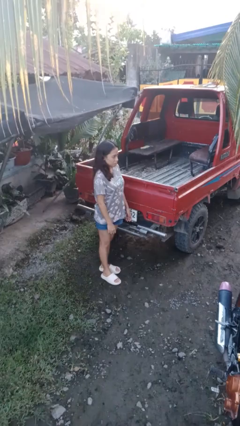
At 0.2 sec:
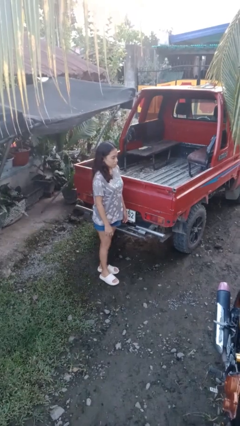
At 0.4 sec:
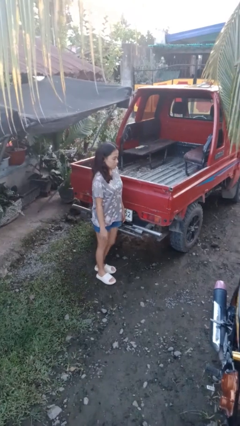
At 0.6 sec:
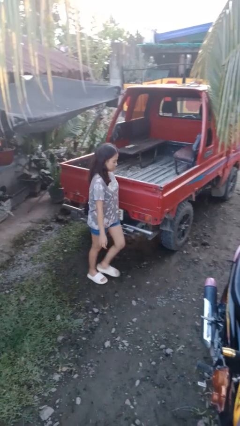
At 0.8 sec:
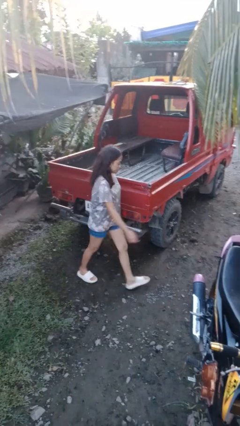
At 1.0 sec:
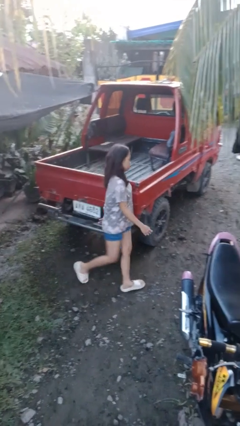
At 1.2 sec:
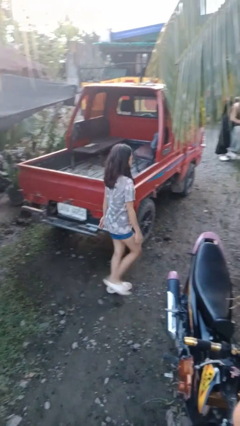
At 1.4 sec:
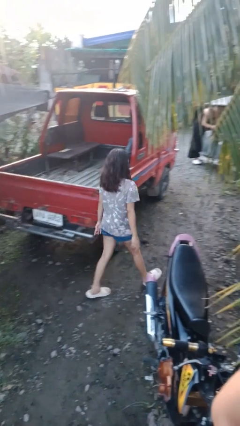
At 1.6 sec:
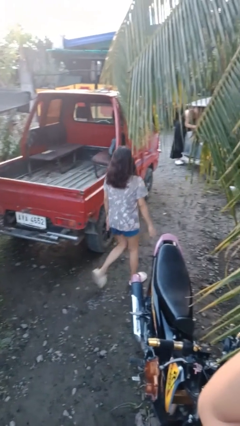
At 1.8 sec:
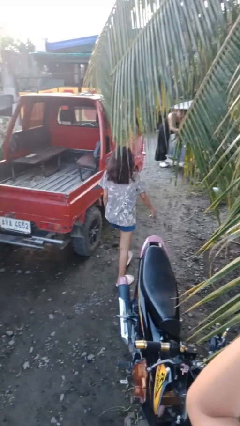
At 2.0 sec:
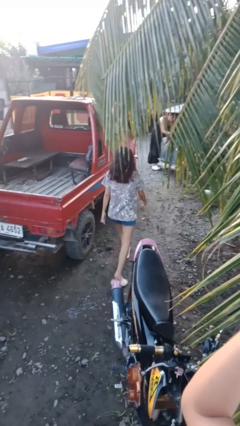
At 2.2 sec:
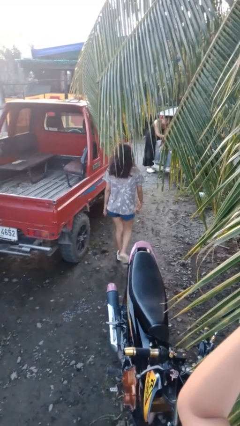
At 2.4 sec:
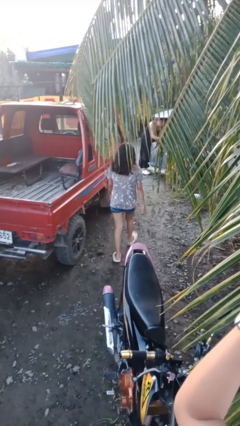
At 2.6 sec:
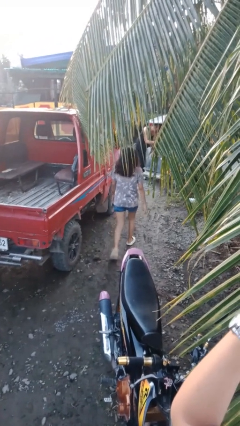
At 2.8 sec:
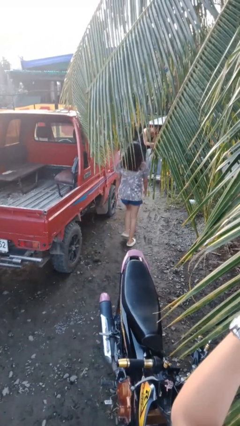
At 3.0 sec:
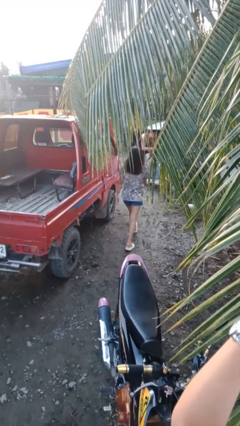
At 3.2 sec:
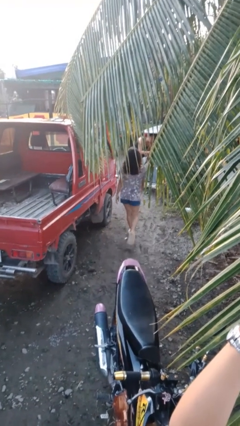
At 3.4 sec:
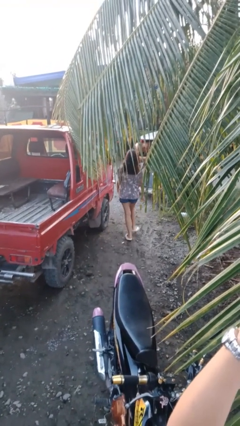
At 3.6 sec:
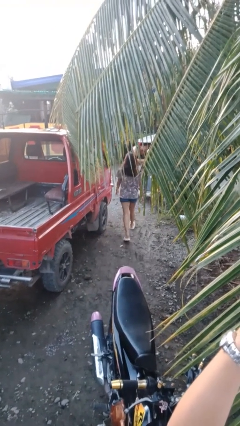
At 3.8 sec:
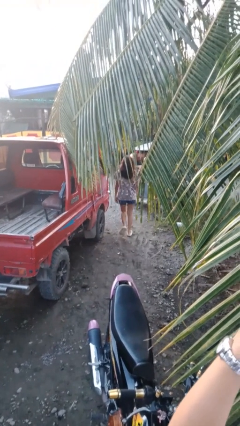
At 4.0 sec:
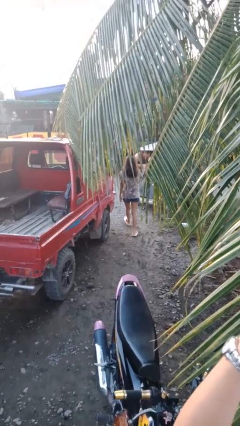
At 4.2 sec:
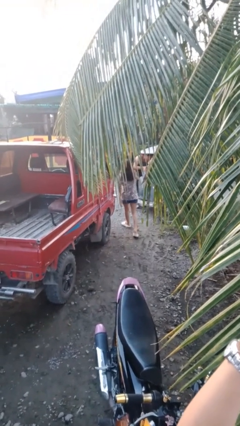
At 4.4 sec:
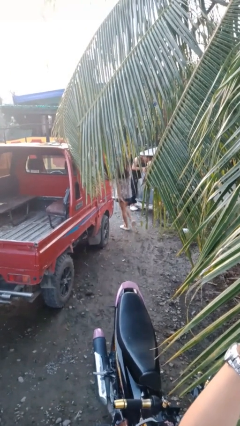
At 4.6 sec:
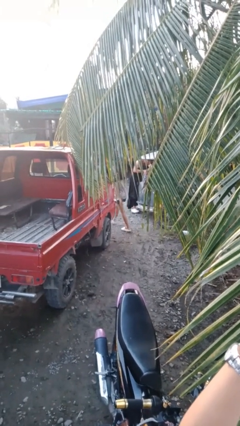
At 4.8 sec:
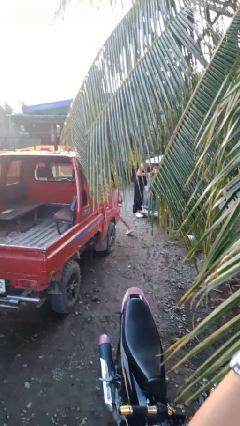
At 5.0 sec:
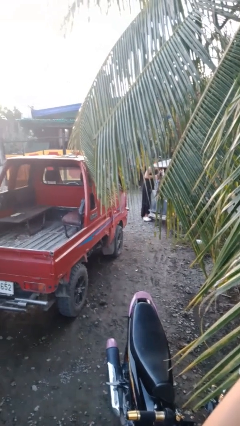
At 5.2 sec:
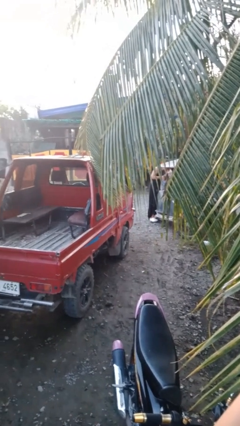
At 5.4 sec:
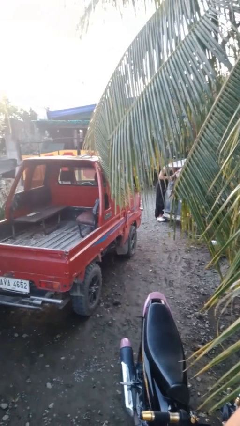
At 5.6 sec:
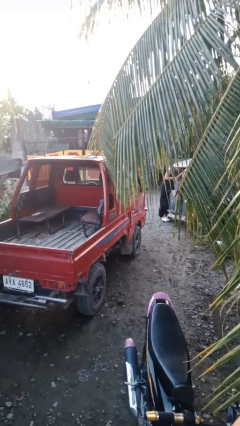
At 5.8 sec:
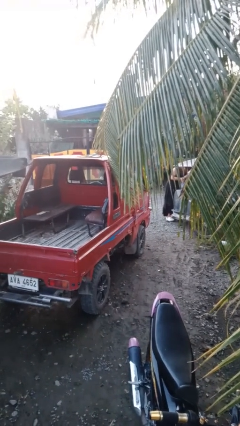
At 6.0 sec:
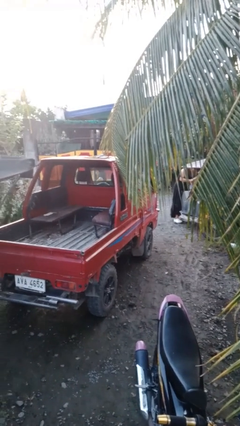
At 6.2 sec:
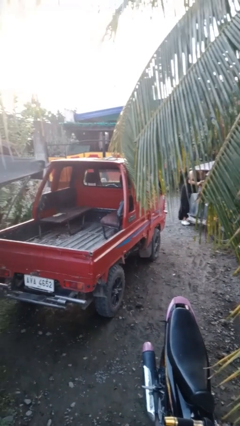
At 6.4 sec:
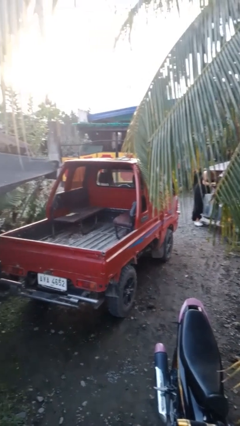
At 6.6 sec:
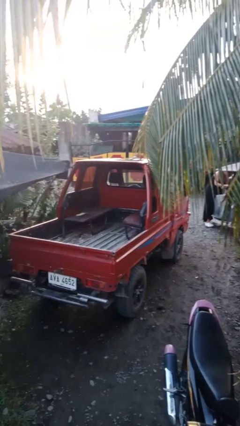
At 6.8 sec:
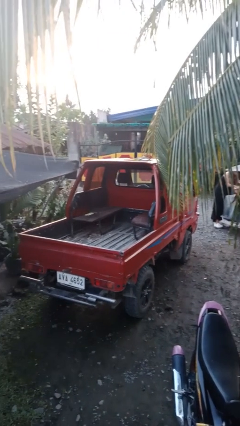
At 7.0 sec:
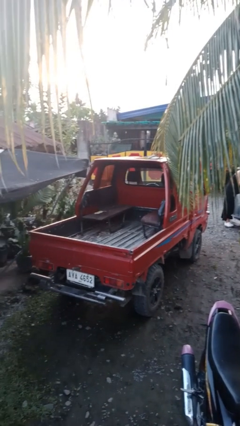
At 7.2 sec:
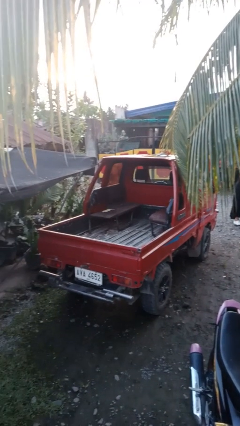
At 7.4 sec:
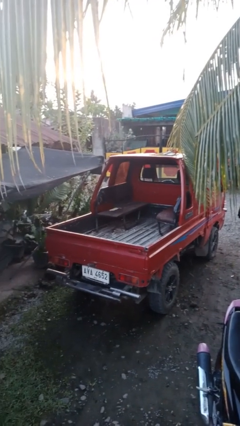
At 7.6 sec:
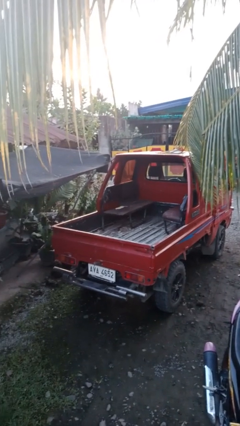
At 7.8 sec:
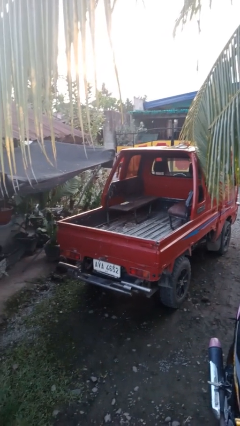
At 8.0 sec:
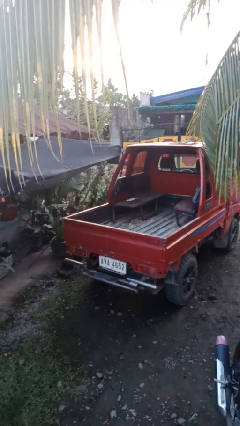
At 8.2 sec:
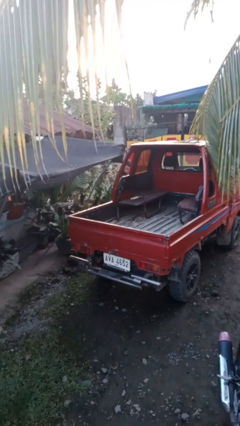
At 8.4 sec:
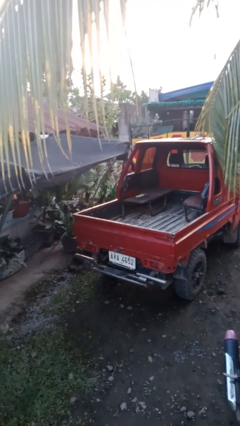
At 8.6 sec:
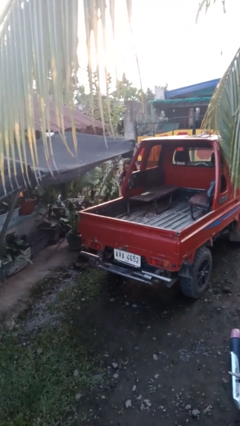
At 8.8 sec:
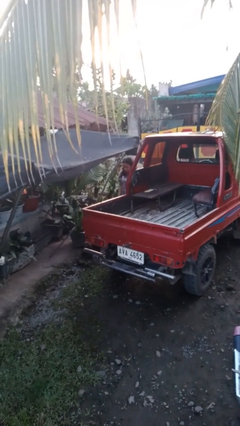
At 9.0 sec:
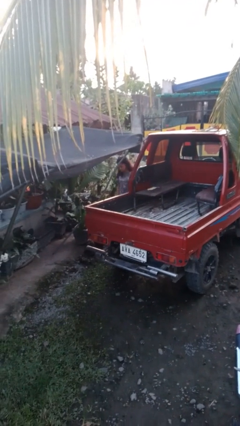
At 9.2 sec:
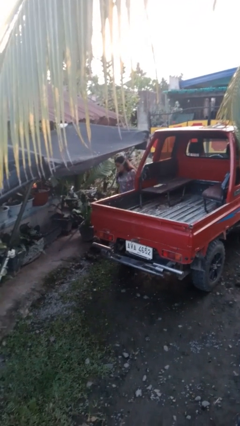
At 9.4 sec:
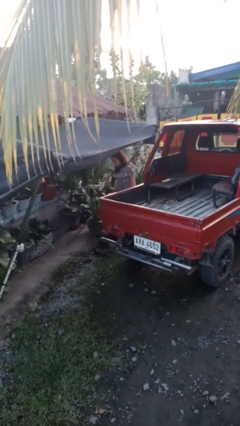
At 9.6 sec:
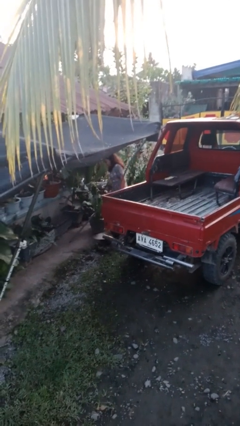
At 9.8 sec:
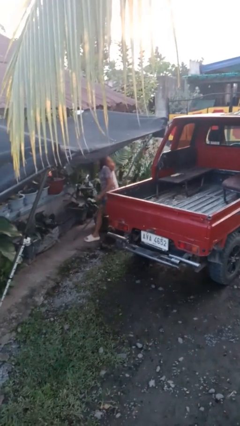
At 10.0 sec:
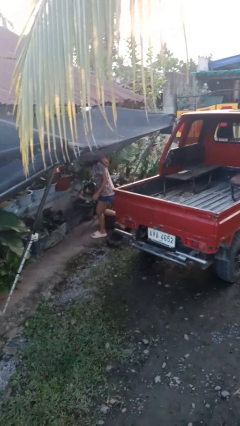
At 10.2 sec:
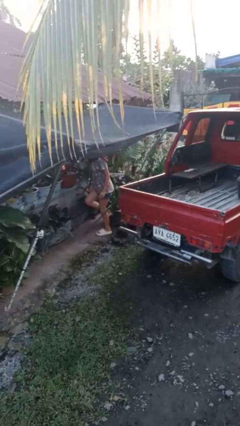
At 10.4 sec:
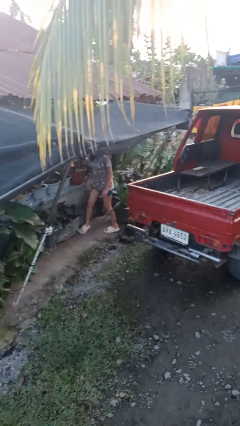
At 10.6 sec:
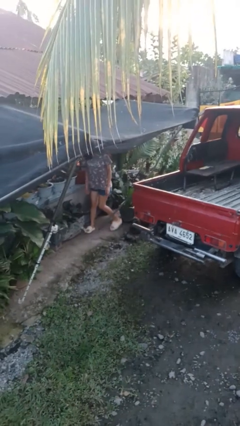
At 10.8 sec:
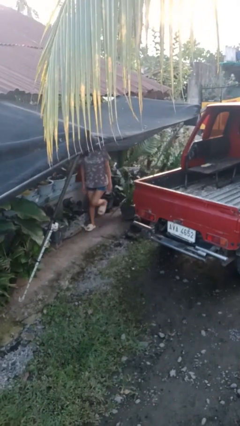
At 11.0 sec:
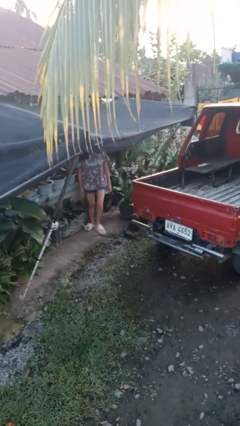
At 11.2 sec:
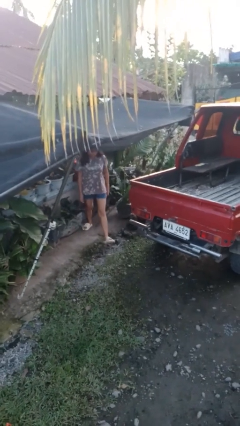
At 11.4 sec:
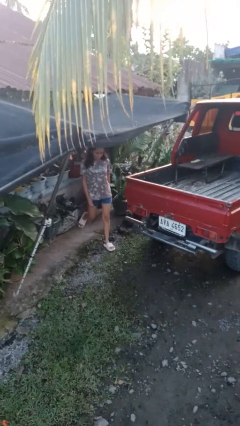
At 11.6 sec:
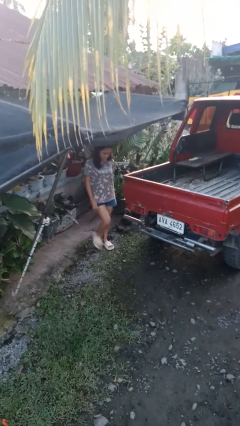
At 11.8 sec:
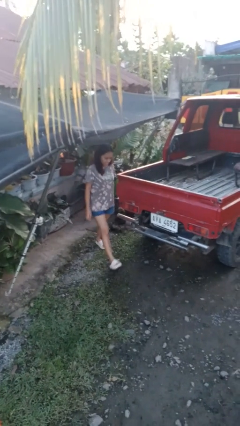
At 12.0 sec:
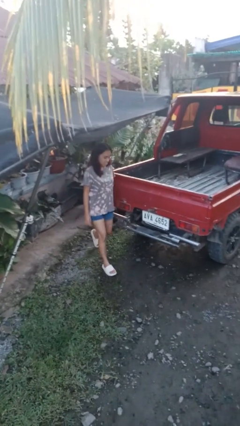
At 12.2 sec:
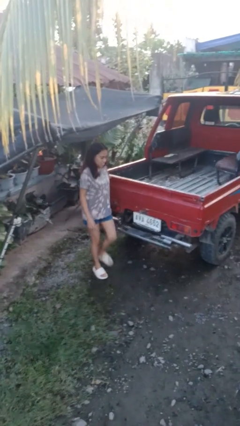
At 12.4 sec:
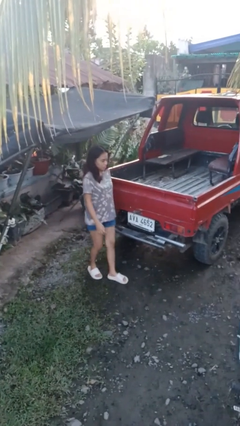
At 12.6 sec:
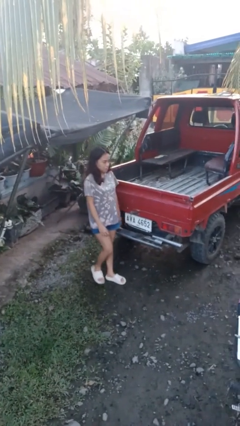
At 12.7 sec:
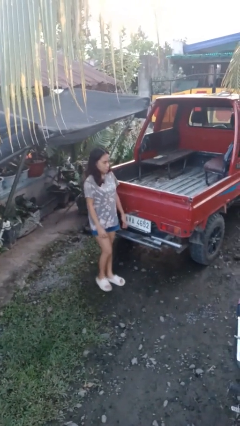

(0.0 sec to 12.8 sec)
person walks around car

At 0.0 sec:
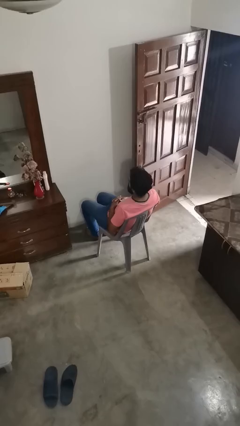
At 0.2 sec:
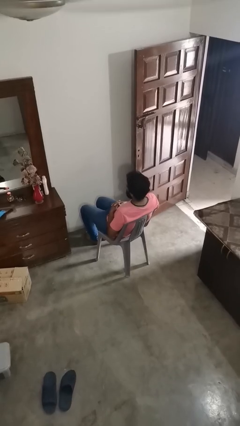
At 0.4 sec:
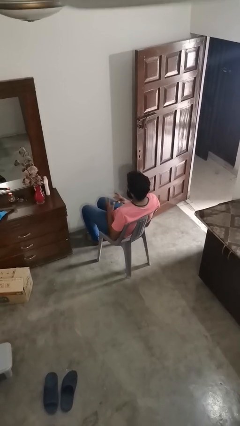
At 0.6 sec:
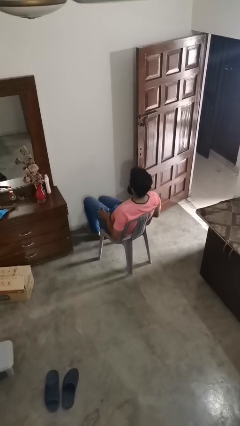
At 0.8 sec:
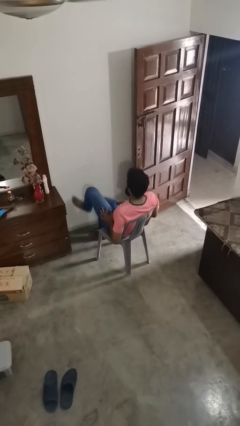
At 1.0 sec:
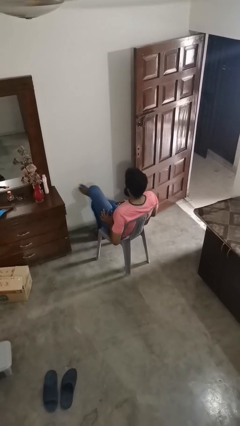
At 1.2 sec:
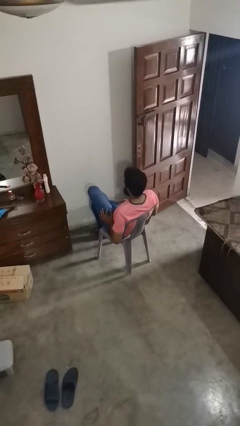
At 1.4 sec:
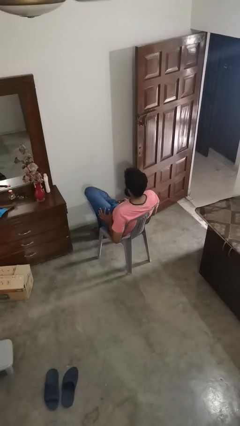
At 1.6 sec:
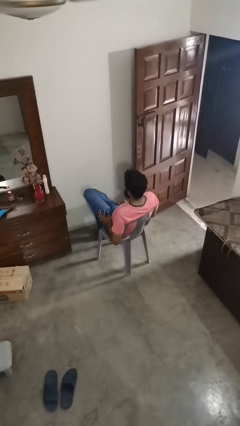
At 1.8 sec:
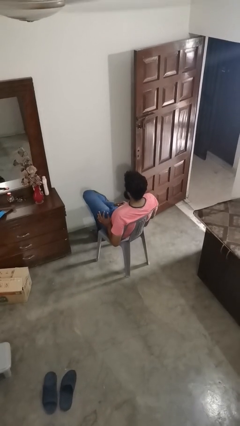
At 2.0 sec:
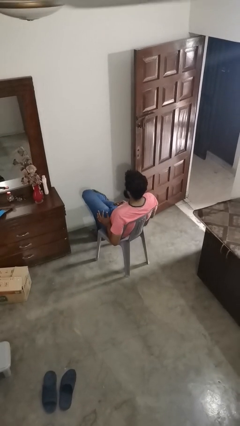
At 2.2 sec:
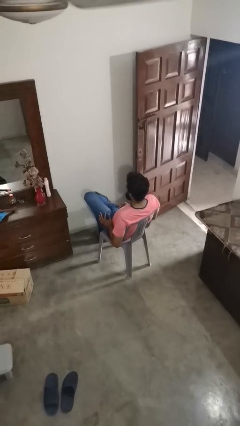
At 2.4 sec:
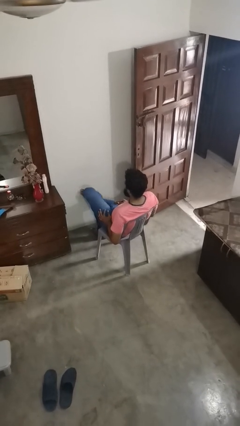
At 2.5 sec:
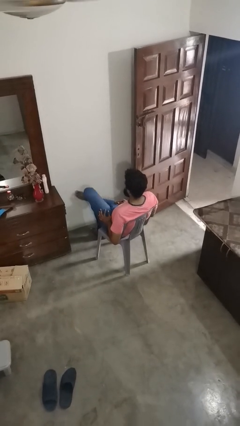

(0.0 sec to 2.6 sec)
person crosses legs

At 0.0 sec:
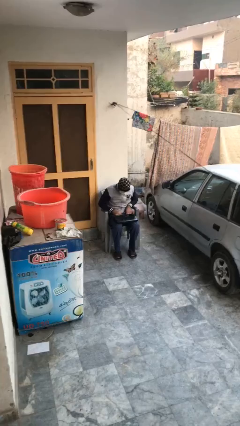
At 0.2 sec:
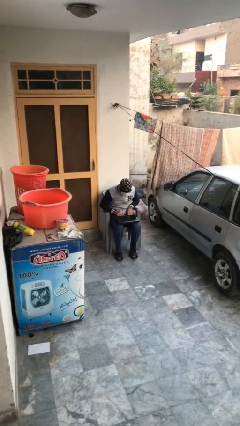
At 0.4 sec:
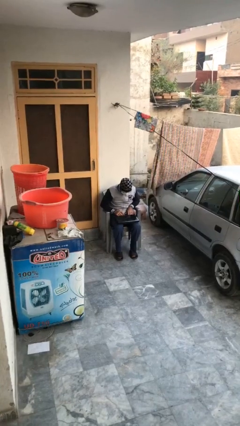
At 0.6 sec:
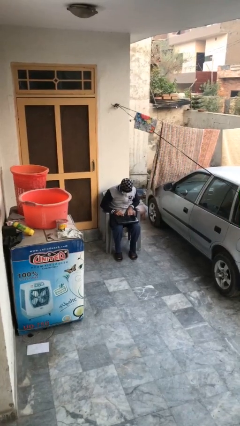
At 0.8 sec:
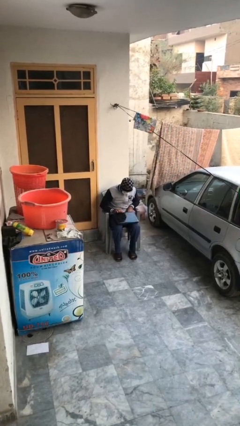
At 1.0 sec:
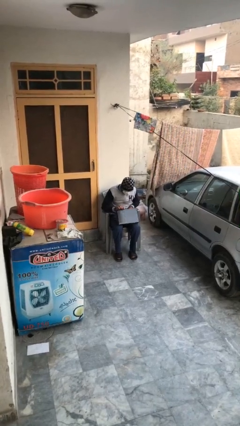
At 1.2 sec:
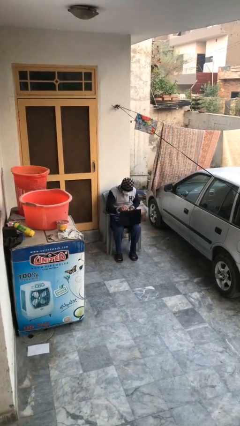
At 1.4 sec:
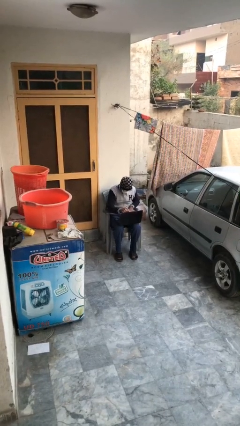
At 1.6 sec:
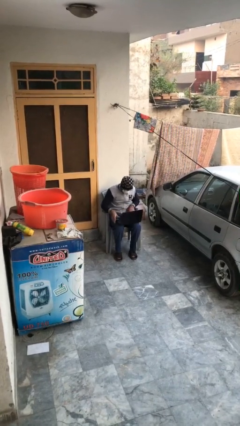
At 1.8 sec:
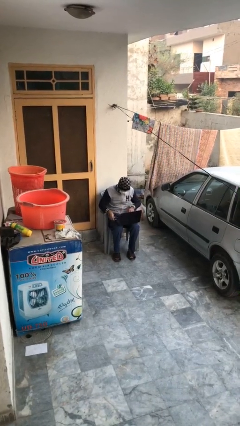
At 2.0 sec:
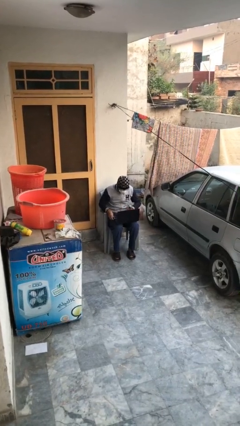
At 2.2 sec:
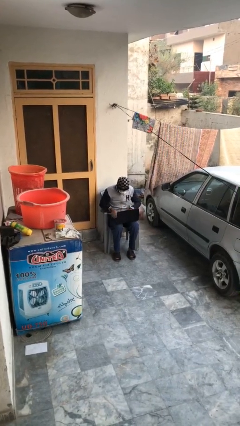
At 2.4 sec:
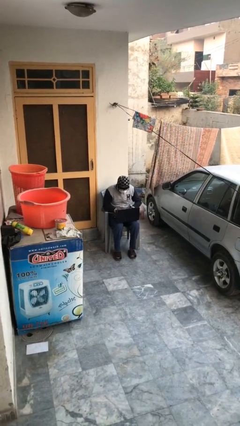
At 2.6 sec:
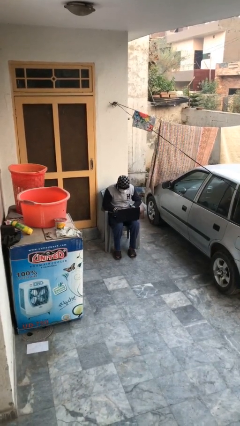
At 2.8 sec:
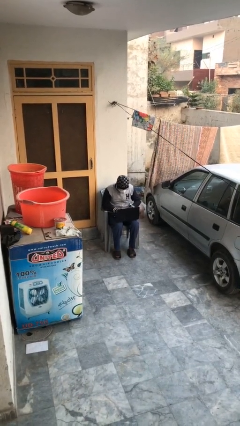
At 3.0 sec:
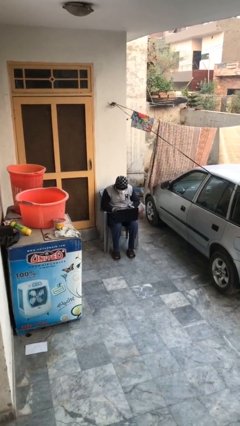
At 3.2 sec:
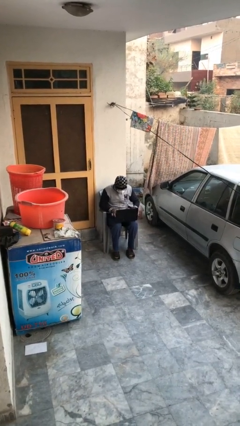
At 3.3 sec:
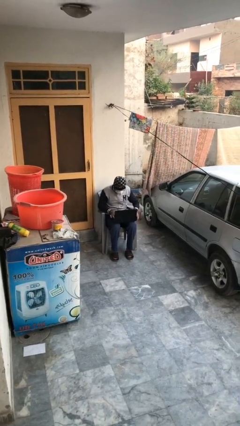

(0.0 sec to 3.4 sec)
person interacts with laptop
